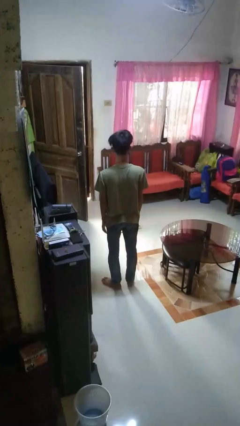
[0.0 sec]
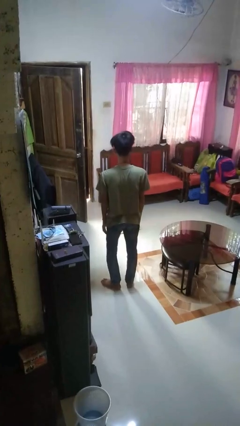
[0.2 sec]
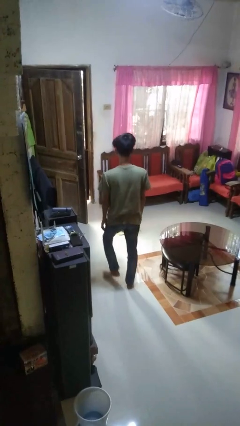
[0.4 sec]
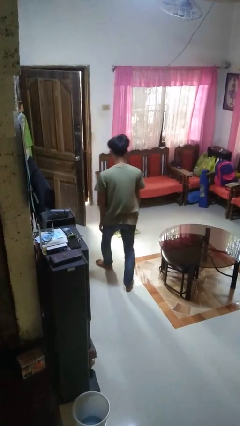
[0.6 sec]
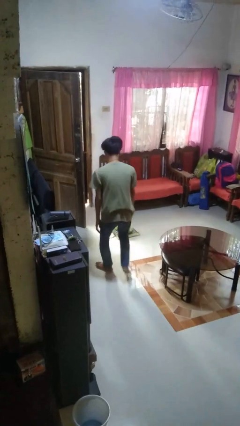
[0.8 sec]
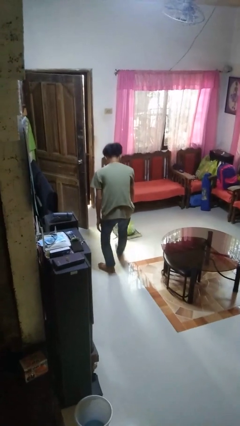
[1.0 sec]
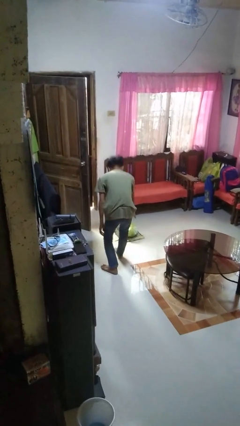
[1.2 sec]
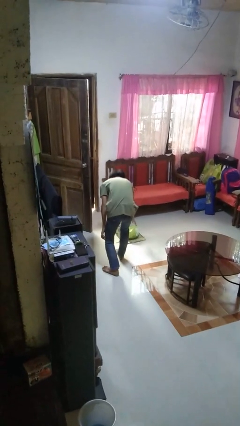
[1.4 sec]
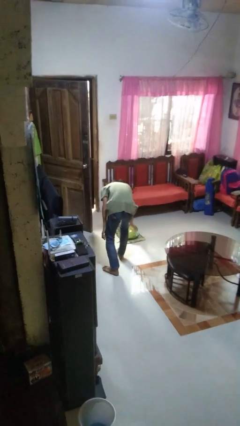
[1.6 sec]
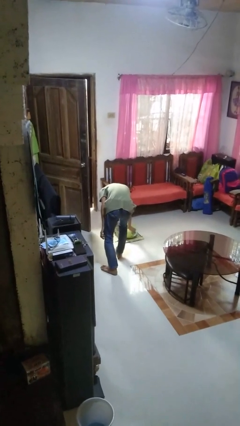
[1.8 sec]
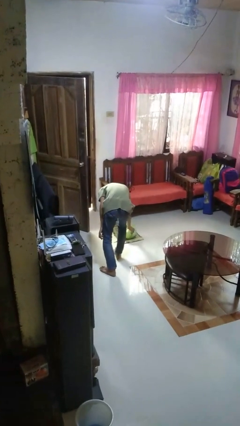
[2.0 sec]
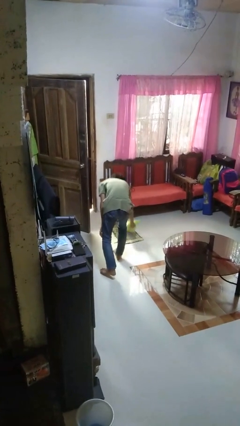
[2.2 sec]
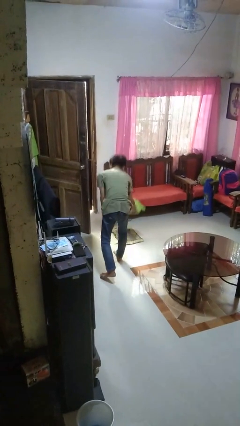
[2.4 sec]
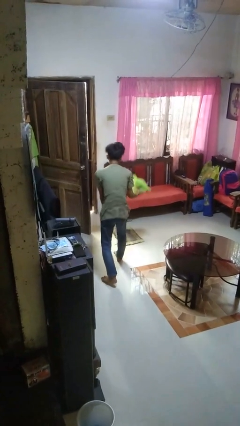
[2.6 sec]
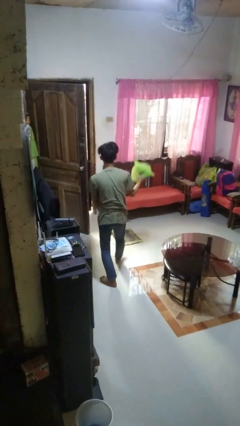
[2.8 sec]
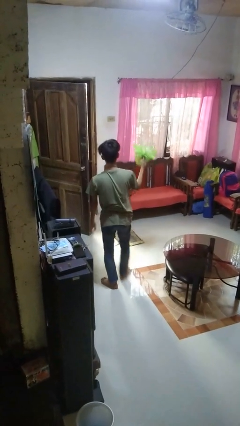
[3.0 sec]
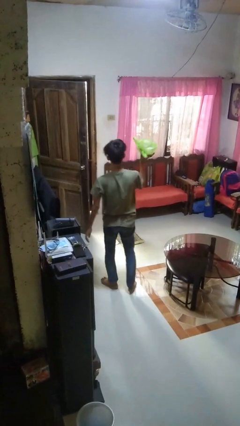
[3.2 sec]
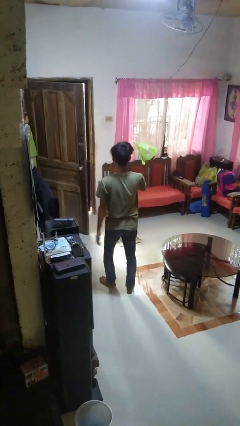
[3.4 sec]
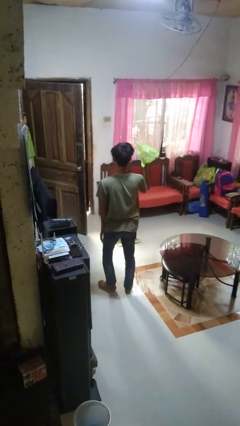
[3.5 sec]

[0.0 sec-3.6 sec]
person picks up object from floor

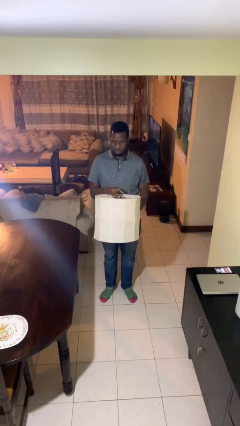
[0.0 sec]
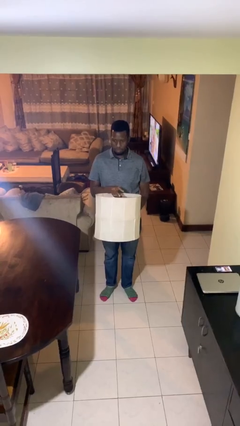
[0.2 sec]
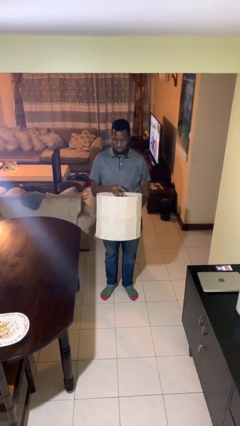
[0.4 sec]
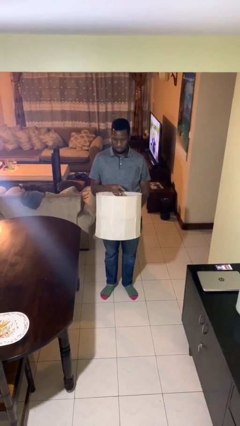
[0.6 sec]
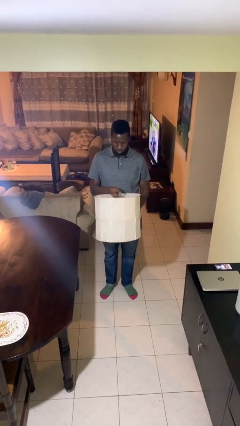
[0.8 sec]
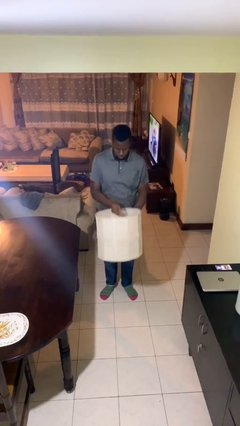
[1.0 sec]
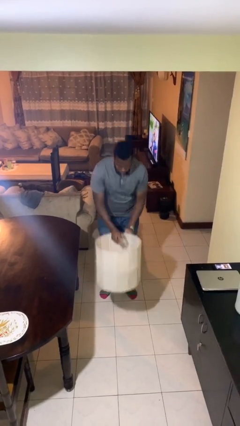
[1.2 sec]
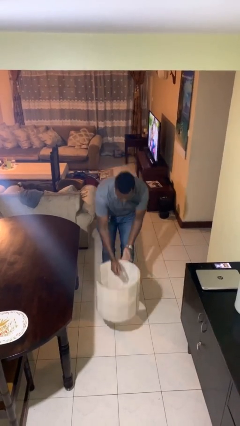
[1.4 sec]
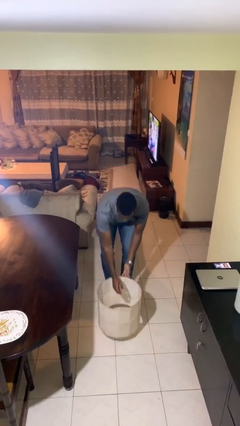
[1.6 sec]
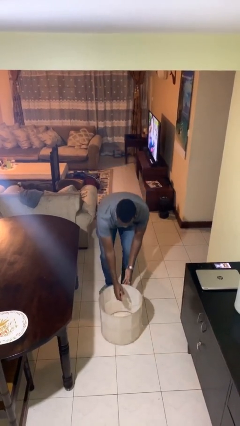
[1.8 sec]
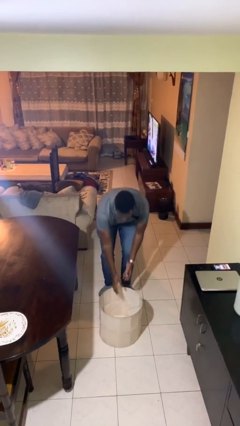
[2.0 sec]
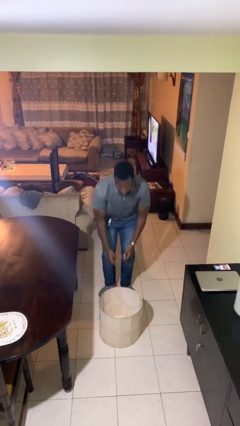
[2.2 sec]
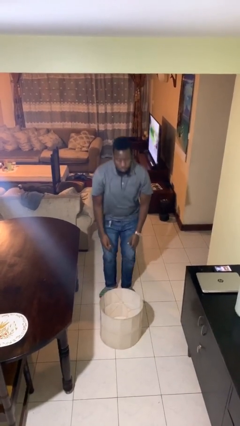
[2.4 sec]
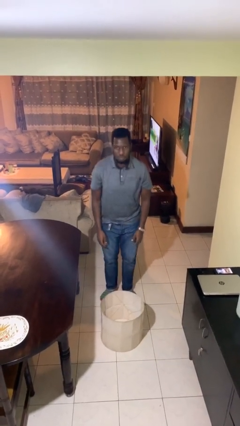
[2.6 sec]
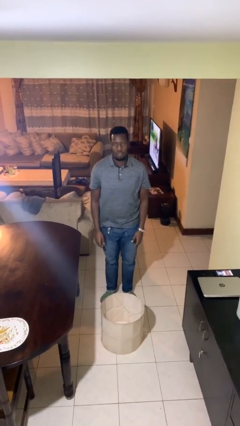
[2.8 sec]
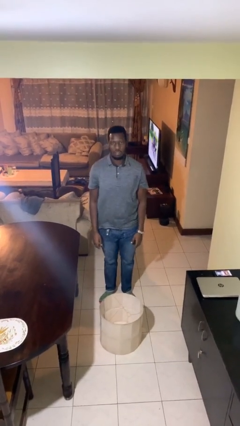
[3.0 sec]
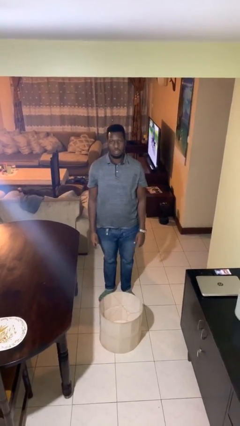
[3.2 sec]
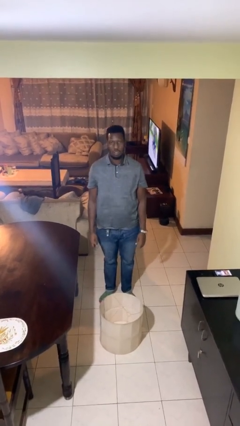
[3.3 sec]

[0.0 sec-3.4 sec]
person puts down object on floor

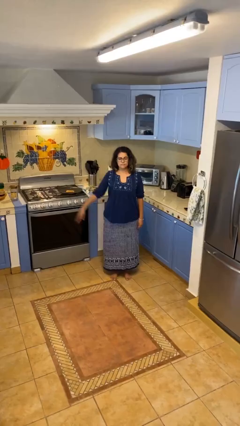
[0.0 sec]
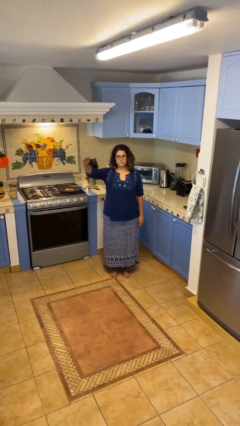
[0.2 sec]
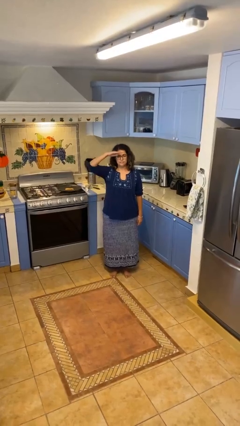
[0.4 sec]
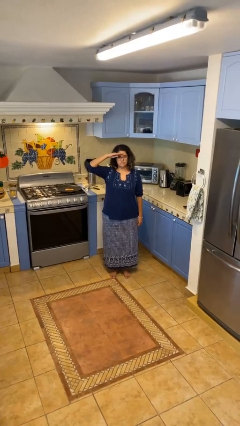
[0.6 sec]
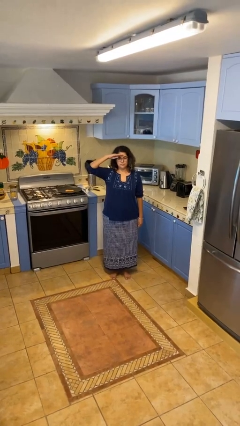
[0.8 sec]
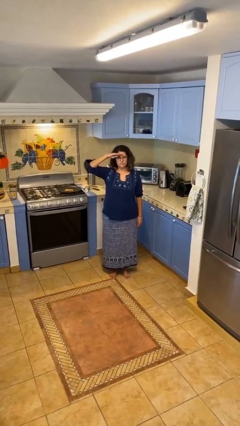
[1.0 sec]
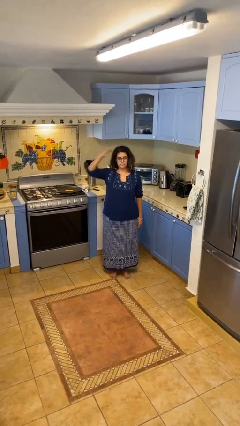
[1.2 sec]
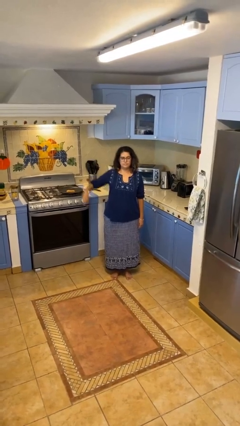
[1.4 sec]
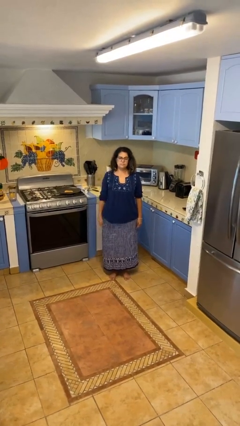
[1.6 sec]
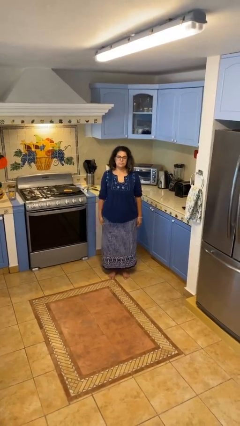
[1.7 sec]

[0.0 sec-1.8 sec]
person salutes

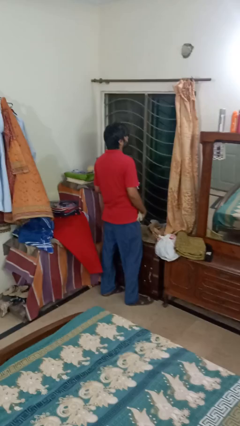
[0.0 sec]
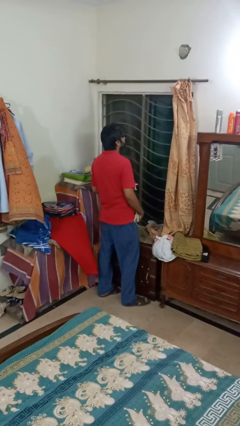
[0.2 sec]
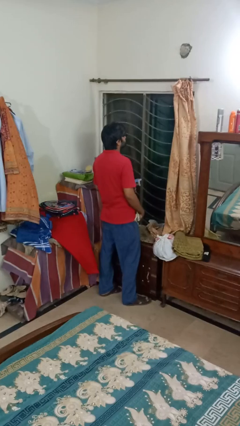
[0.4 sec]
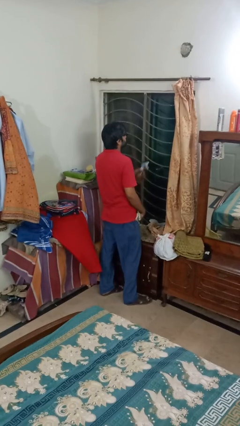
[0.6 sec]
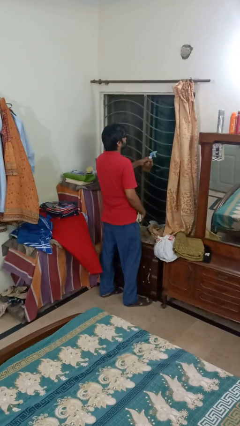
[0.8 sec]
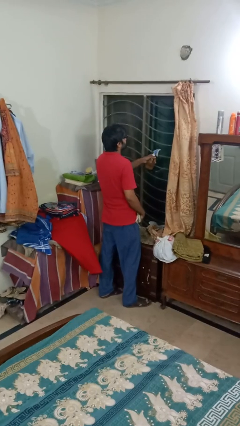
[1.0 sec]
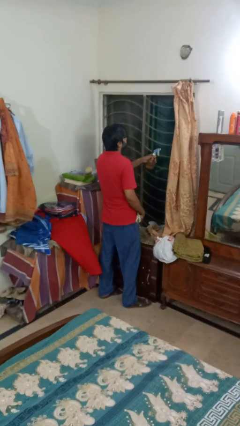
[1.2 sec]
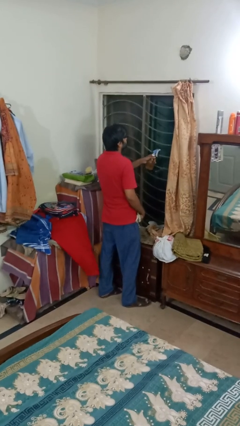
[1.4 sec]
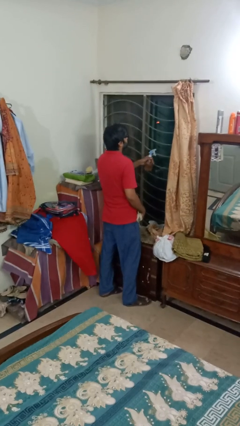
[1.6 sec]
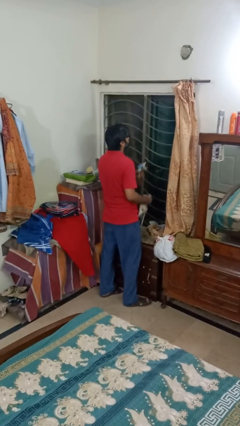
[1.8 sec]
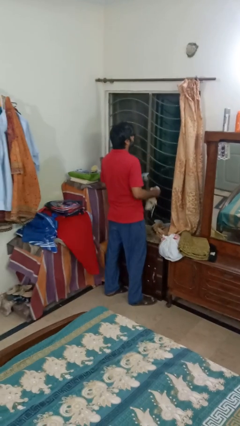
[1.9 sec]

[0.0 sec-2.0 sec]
person sprays from bottle

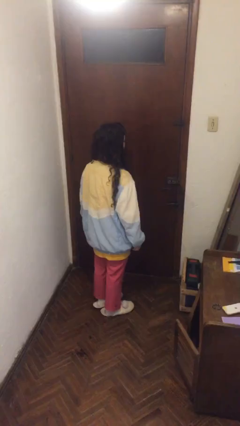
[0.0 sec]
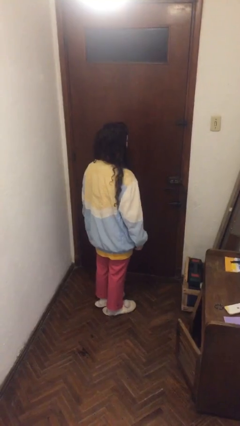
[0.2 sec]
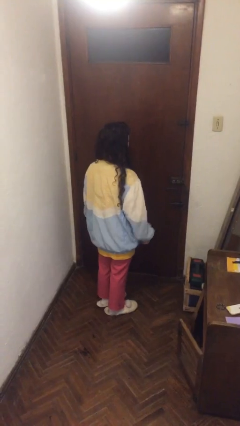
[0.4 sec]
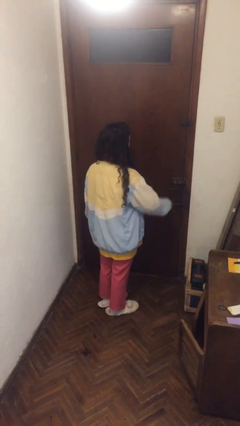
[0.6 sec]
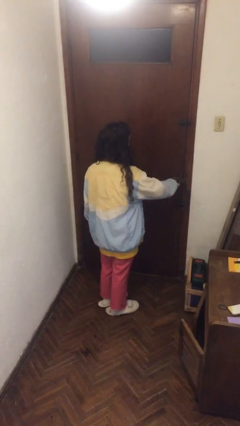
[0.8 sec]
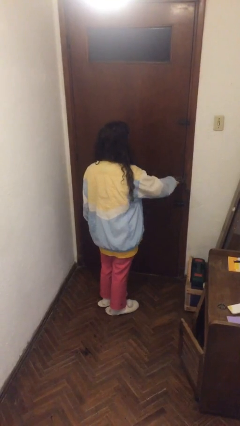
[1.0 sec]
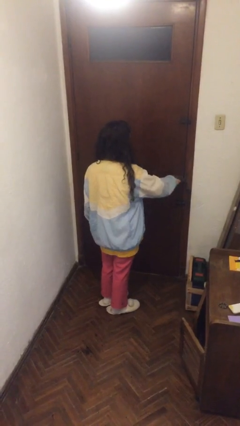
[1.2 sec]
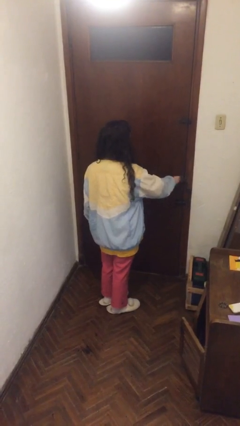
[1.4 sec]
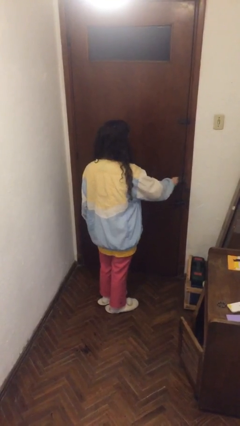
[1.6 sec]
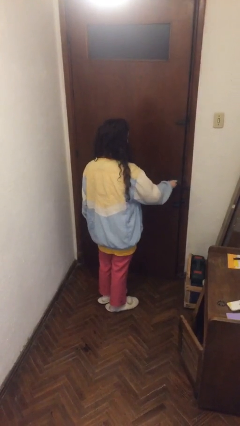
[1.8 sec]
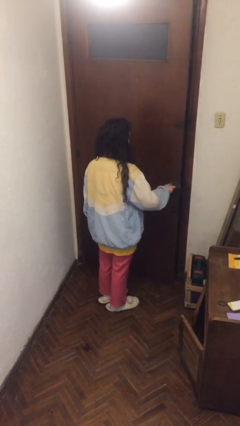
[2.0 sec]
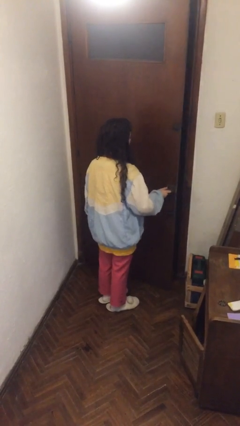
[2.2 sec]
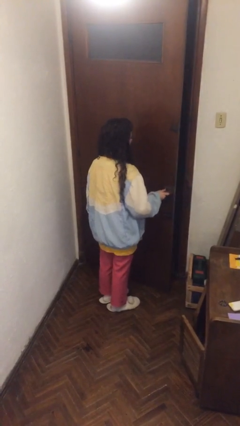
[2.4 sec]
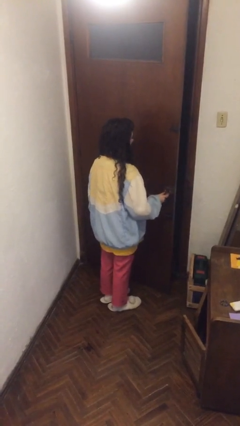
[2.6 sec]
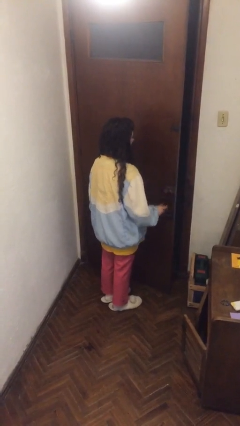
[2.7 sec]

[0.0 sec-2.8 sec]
person opens facility door

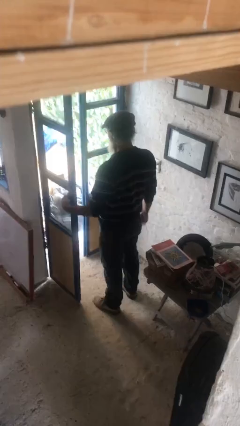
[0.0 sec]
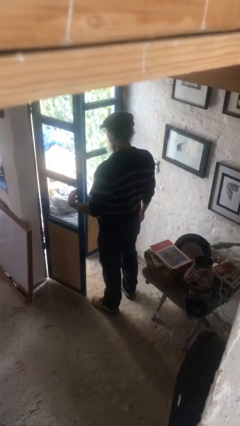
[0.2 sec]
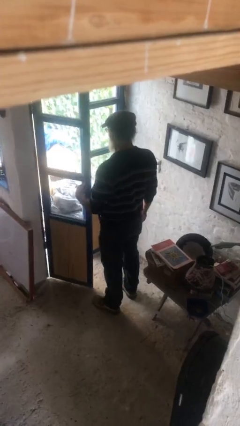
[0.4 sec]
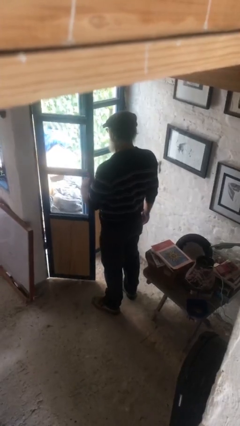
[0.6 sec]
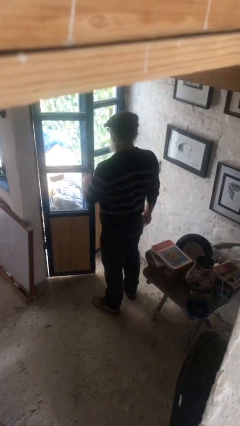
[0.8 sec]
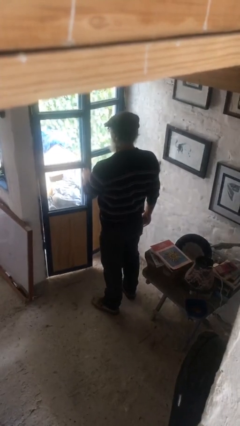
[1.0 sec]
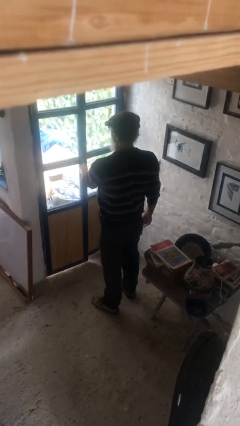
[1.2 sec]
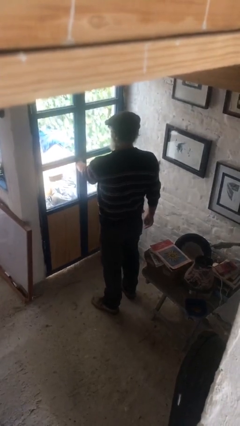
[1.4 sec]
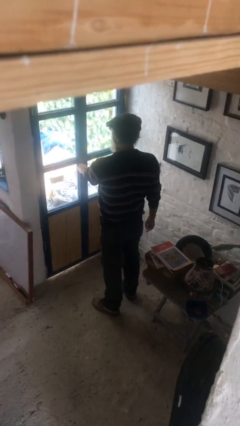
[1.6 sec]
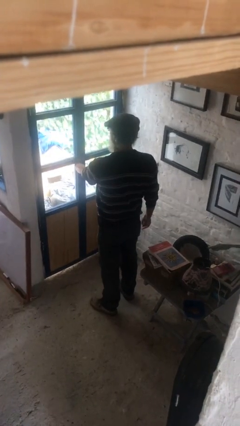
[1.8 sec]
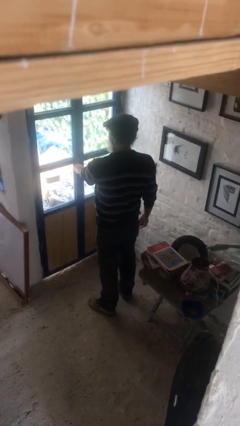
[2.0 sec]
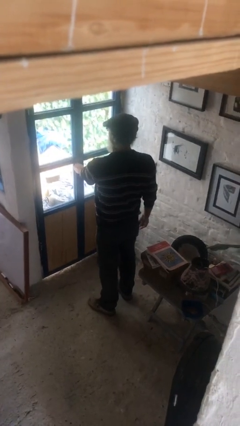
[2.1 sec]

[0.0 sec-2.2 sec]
person closes facility door

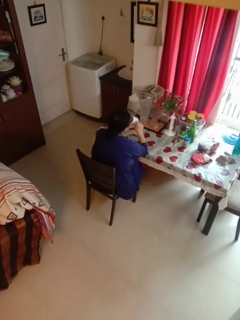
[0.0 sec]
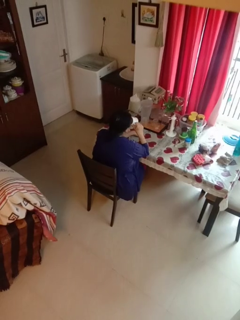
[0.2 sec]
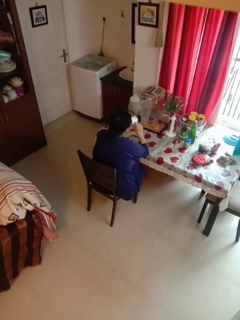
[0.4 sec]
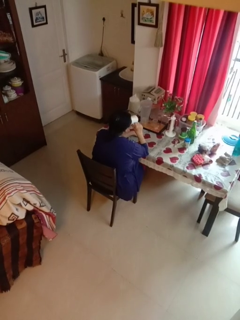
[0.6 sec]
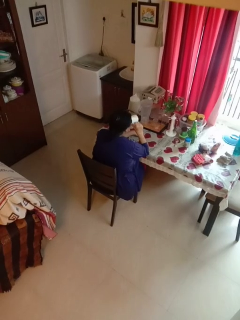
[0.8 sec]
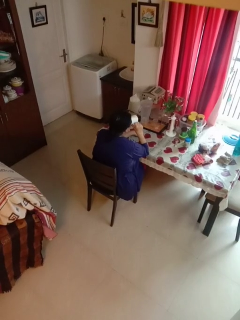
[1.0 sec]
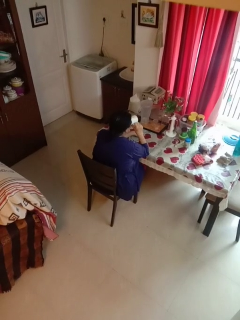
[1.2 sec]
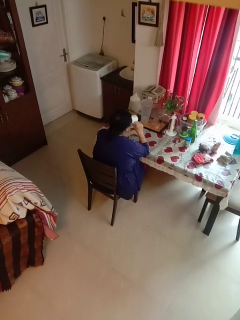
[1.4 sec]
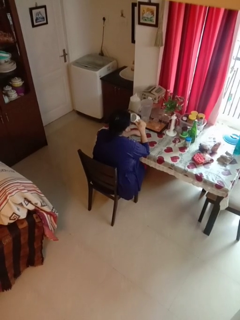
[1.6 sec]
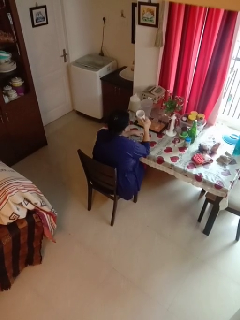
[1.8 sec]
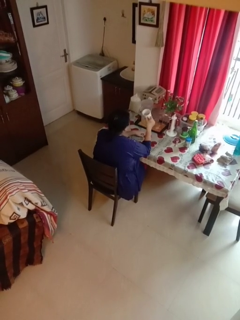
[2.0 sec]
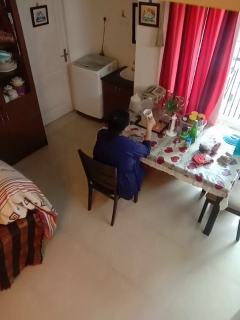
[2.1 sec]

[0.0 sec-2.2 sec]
person drinks from mug
